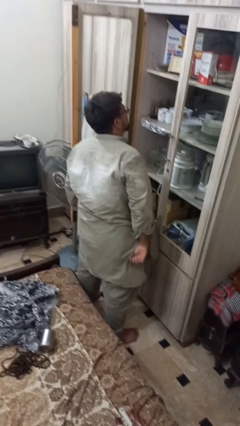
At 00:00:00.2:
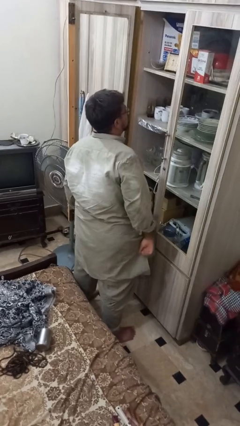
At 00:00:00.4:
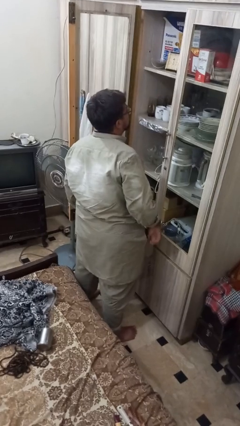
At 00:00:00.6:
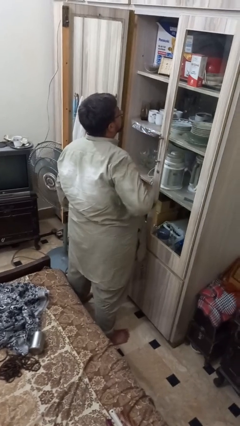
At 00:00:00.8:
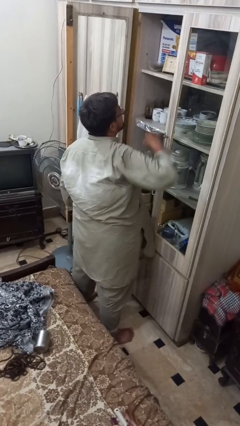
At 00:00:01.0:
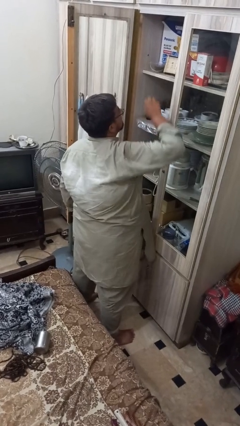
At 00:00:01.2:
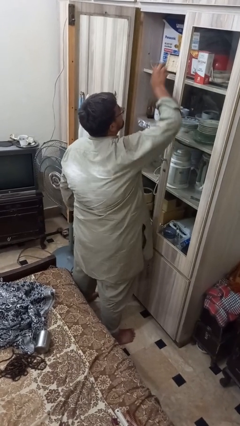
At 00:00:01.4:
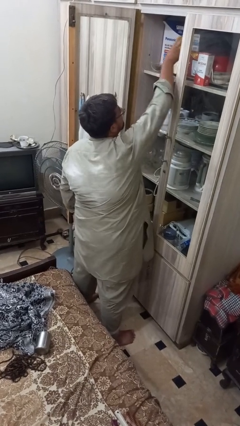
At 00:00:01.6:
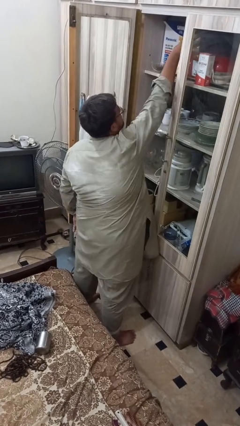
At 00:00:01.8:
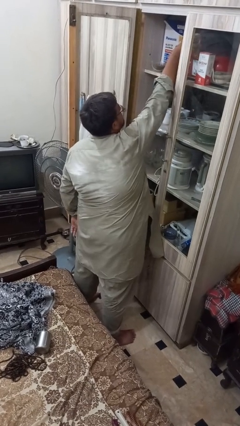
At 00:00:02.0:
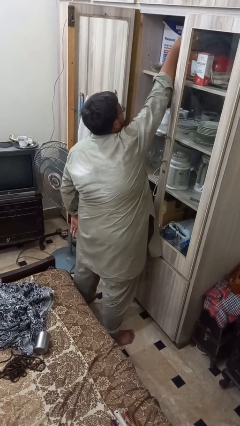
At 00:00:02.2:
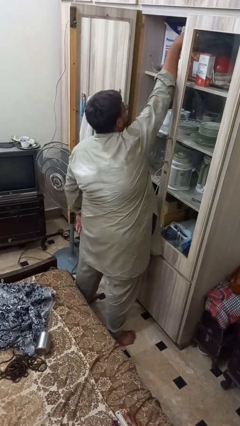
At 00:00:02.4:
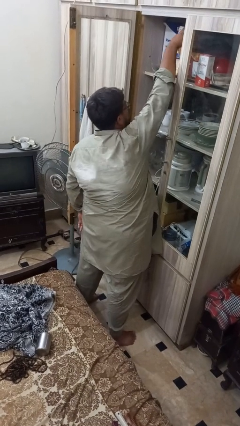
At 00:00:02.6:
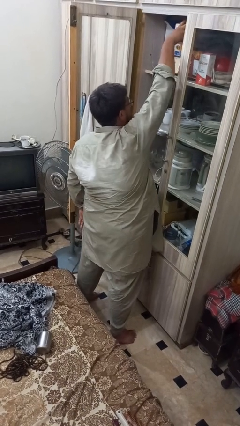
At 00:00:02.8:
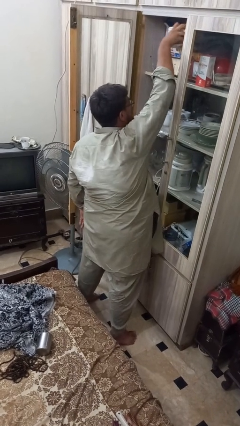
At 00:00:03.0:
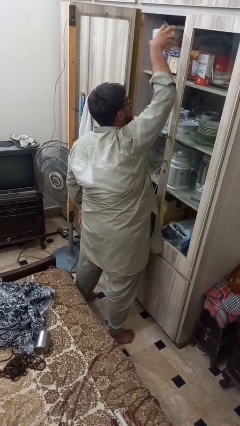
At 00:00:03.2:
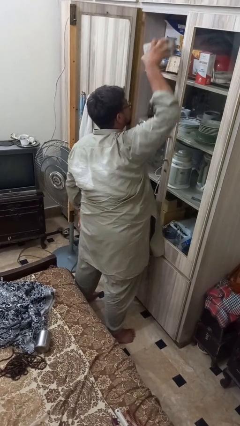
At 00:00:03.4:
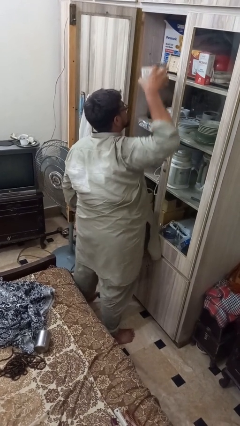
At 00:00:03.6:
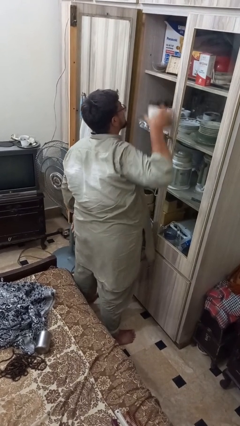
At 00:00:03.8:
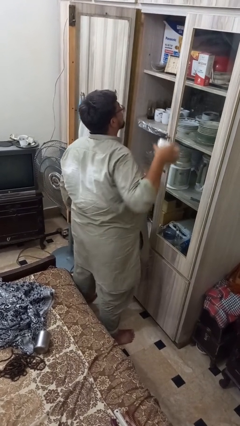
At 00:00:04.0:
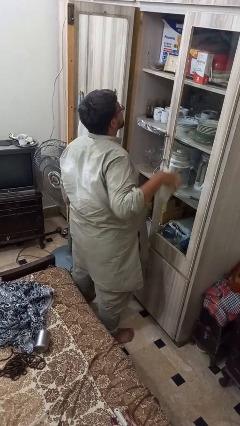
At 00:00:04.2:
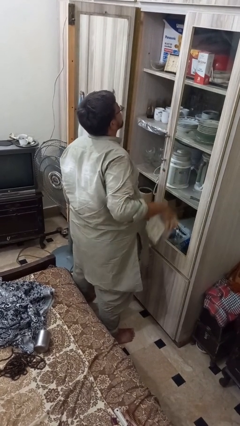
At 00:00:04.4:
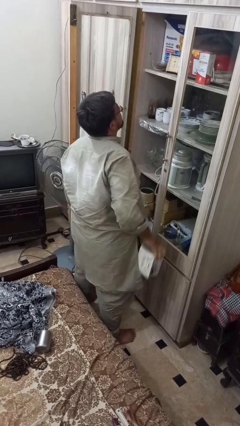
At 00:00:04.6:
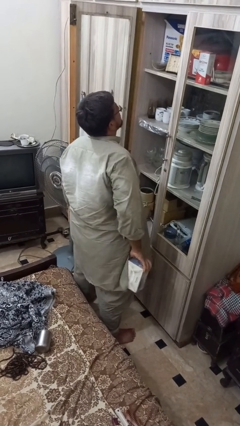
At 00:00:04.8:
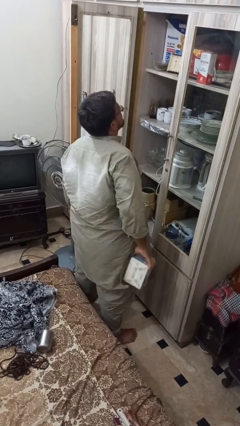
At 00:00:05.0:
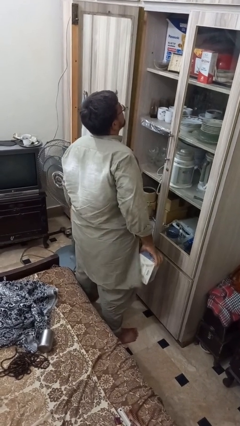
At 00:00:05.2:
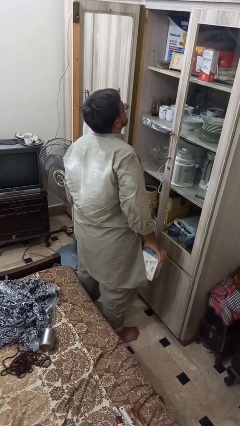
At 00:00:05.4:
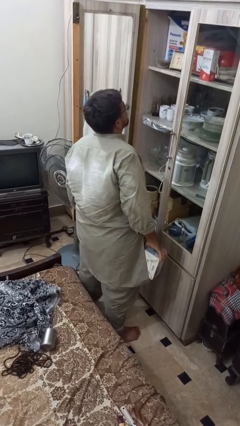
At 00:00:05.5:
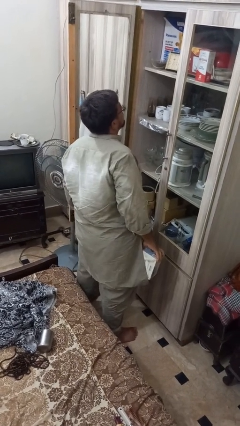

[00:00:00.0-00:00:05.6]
person picks up object from shelf

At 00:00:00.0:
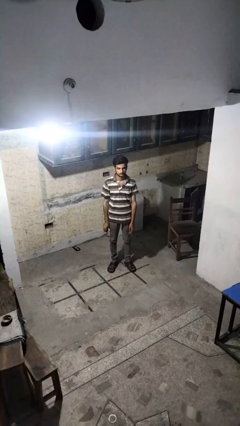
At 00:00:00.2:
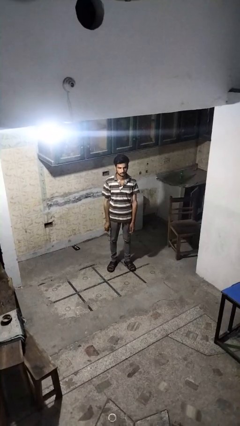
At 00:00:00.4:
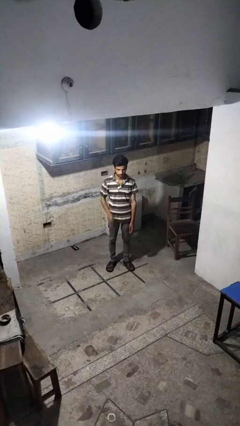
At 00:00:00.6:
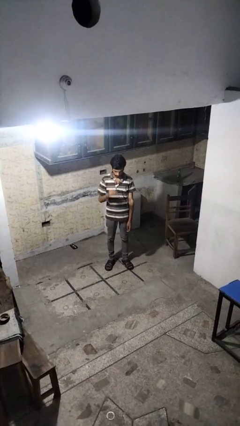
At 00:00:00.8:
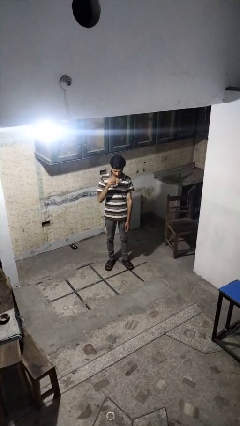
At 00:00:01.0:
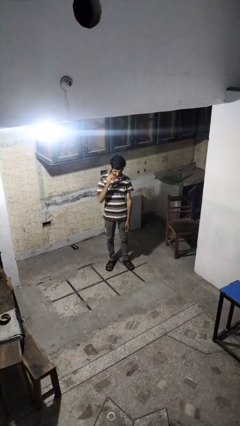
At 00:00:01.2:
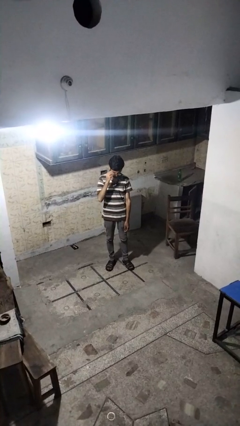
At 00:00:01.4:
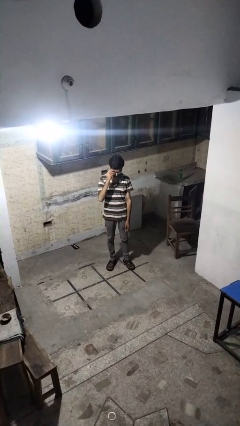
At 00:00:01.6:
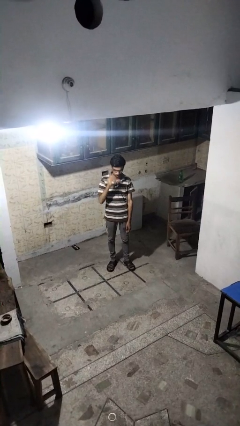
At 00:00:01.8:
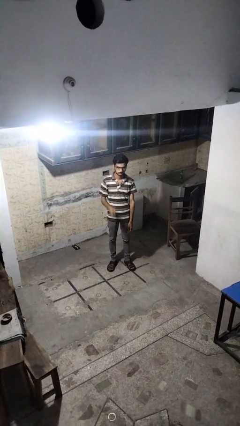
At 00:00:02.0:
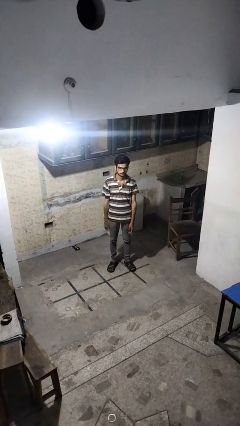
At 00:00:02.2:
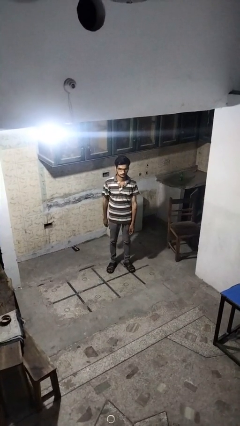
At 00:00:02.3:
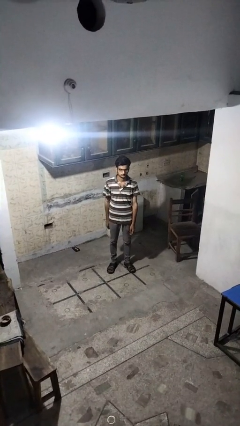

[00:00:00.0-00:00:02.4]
person puts on glasses

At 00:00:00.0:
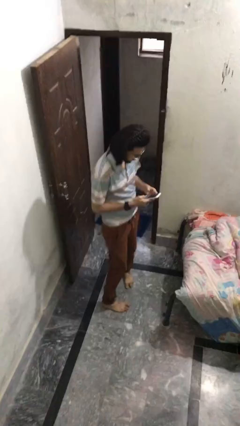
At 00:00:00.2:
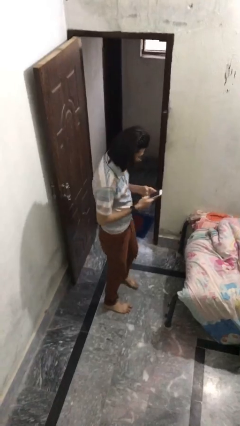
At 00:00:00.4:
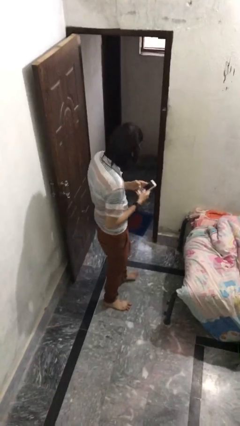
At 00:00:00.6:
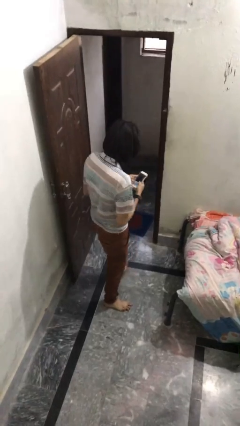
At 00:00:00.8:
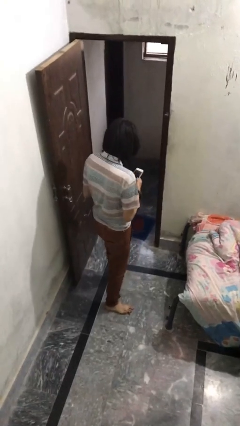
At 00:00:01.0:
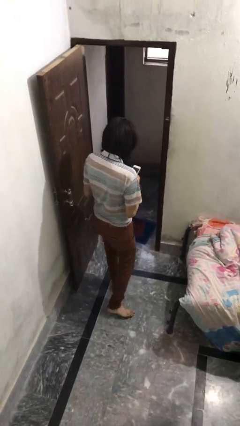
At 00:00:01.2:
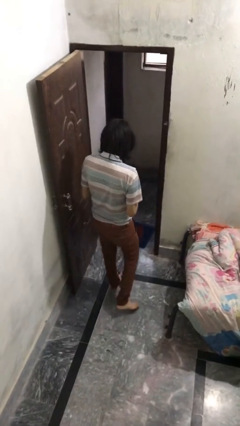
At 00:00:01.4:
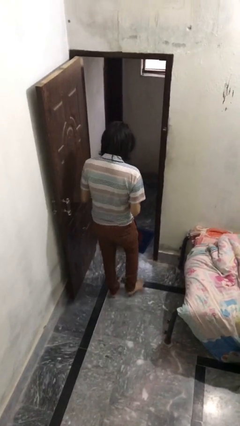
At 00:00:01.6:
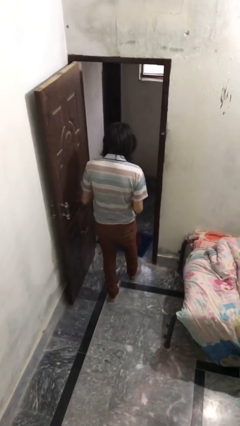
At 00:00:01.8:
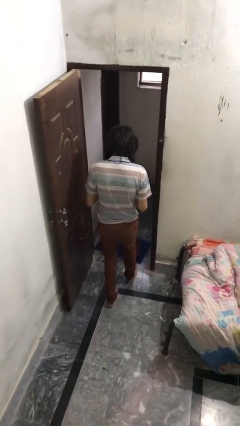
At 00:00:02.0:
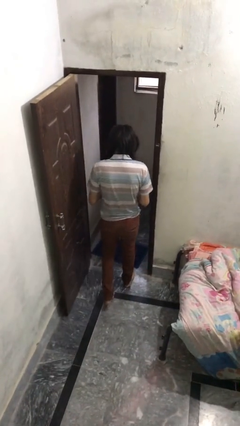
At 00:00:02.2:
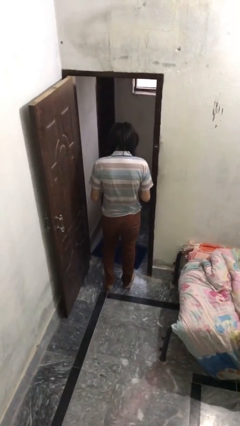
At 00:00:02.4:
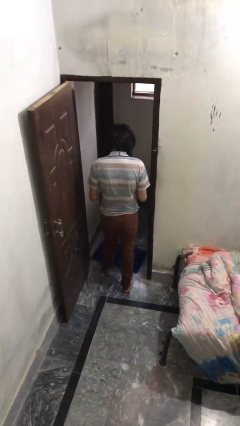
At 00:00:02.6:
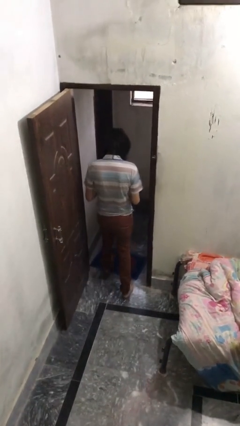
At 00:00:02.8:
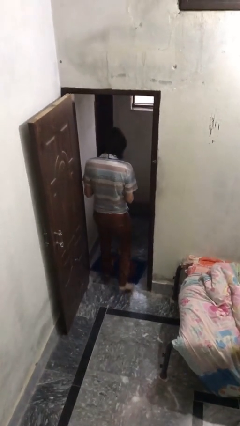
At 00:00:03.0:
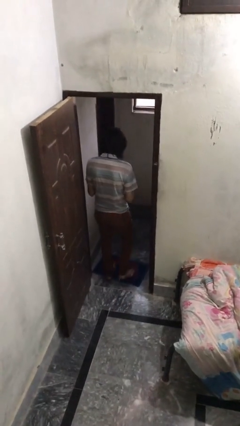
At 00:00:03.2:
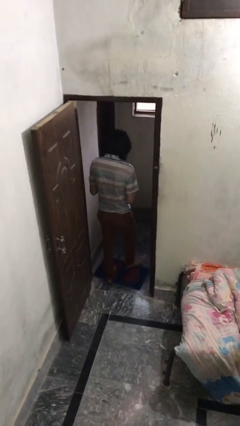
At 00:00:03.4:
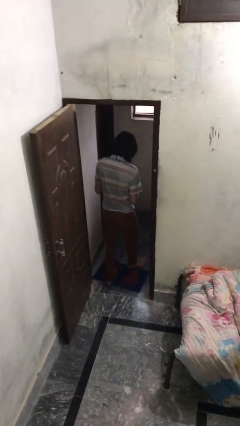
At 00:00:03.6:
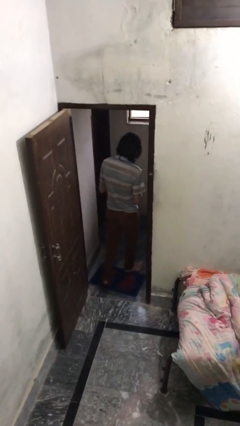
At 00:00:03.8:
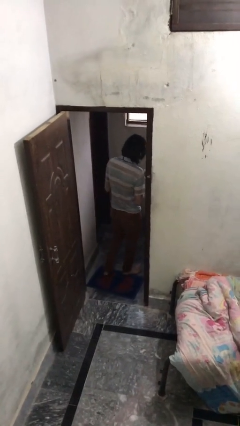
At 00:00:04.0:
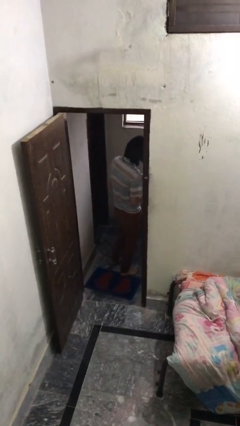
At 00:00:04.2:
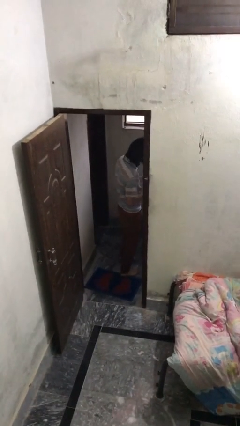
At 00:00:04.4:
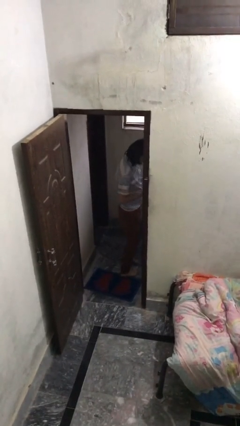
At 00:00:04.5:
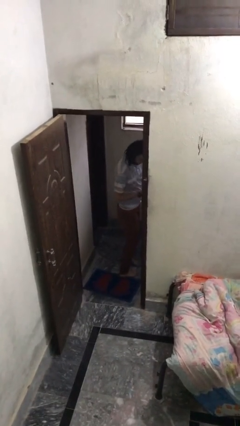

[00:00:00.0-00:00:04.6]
person exits scene through structure

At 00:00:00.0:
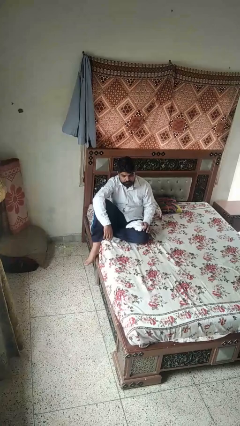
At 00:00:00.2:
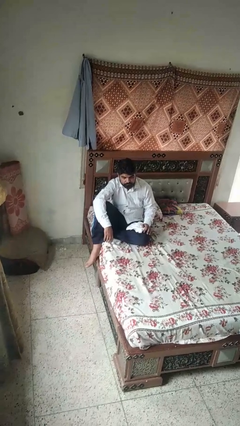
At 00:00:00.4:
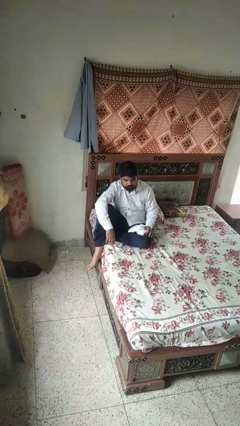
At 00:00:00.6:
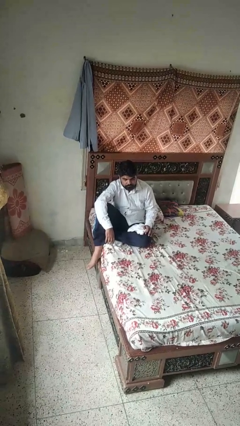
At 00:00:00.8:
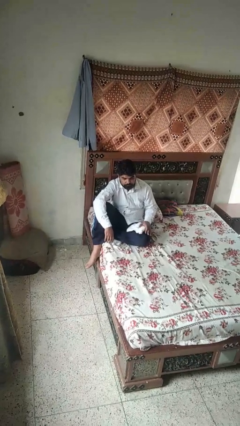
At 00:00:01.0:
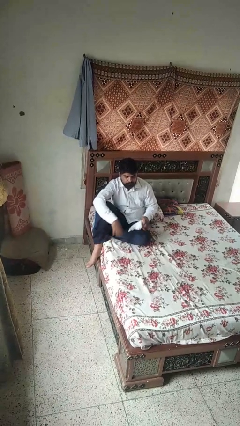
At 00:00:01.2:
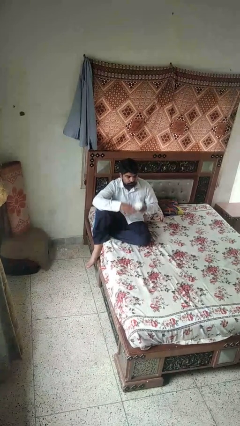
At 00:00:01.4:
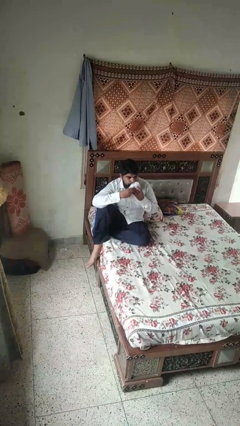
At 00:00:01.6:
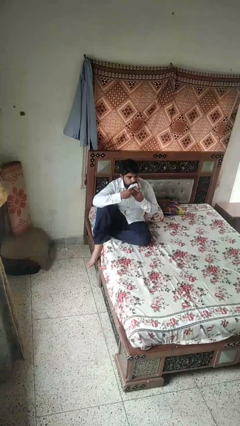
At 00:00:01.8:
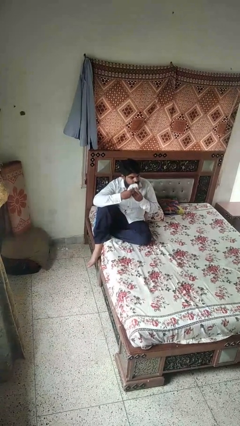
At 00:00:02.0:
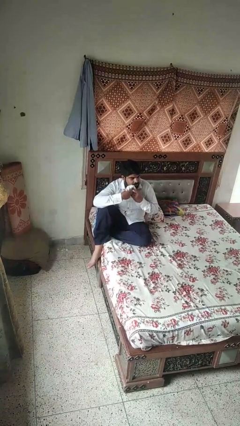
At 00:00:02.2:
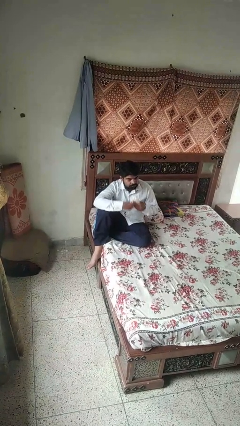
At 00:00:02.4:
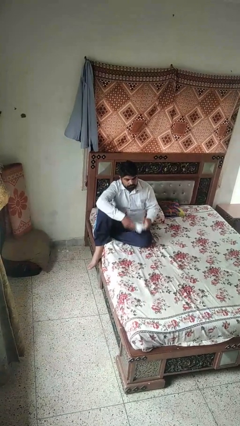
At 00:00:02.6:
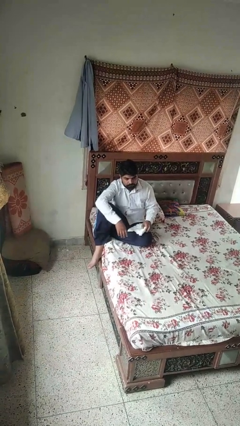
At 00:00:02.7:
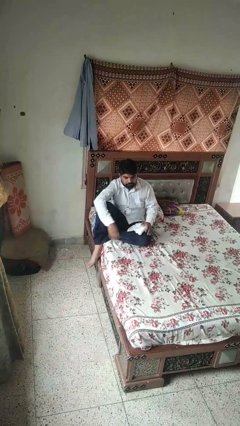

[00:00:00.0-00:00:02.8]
person wipes mouth with napkin

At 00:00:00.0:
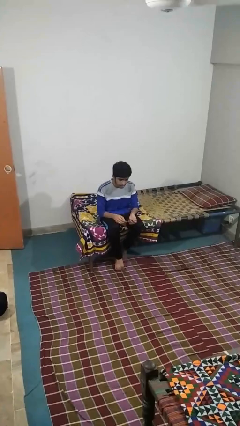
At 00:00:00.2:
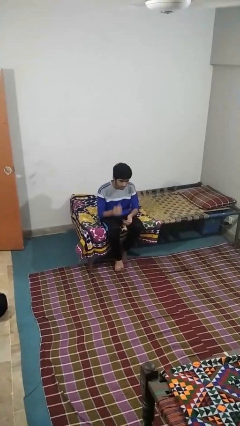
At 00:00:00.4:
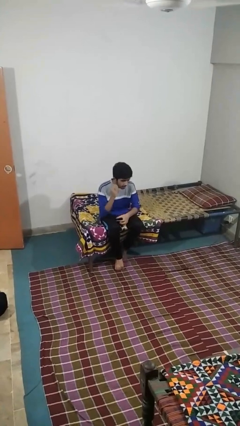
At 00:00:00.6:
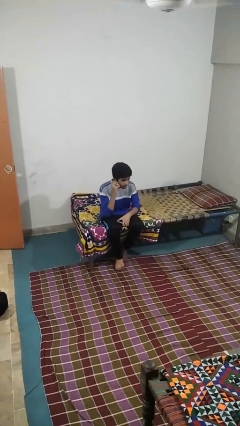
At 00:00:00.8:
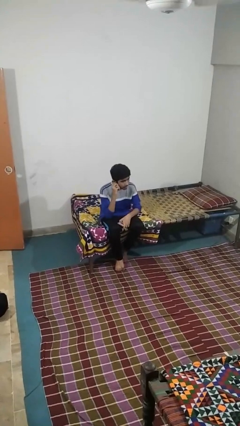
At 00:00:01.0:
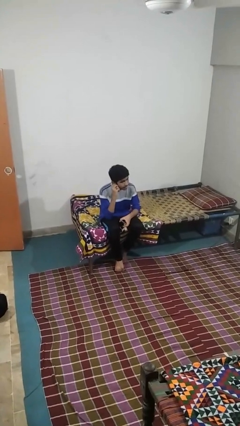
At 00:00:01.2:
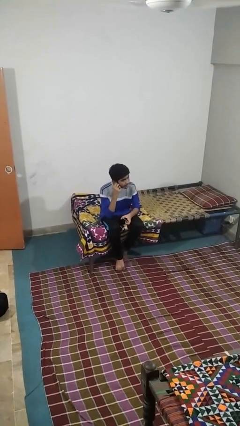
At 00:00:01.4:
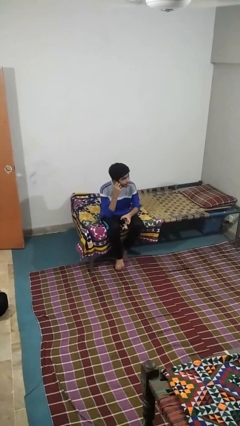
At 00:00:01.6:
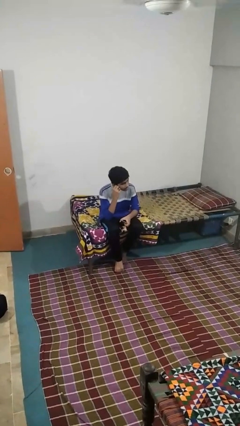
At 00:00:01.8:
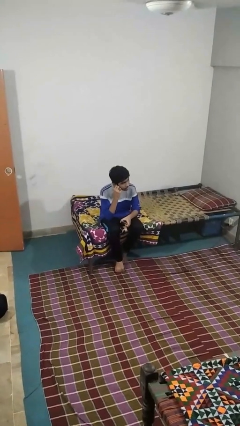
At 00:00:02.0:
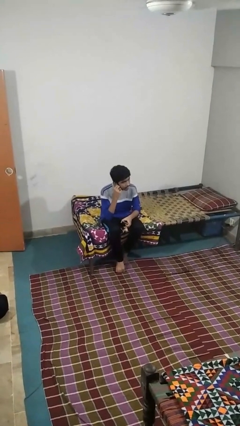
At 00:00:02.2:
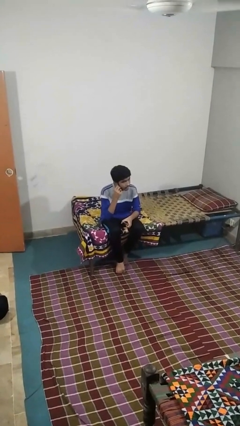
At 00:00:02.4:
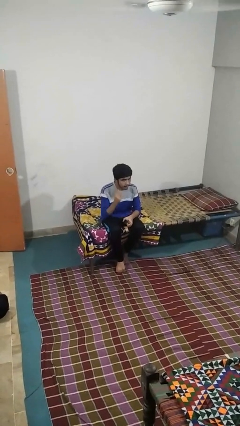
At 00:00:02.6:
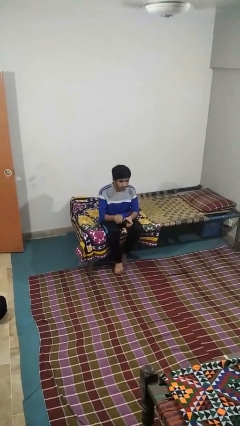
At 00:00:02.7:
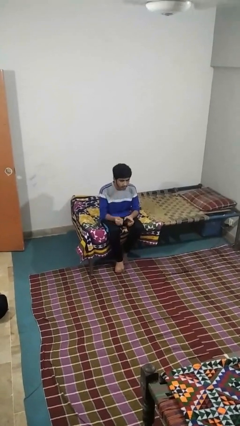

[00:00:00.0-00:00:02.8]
person touches earlobe
